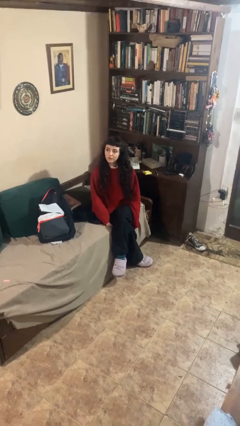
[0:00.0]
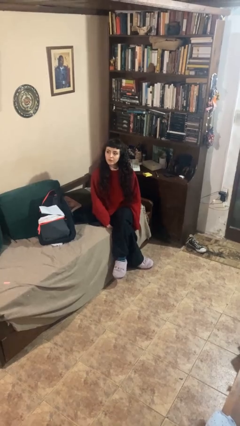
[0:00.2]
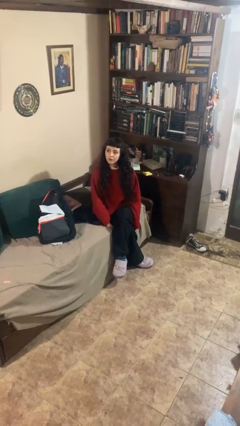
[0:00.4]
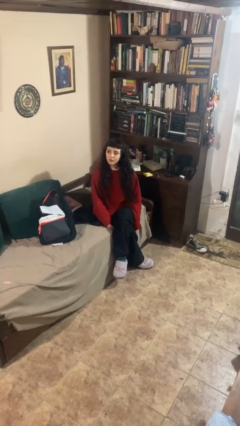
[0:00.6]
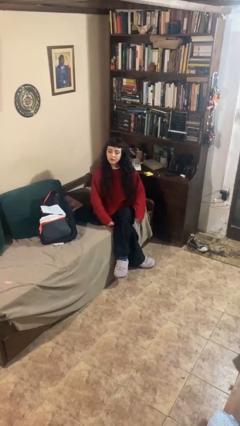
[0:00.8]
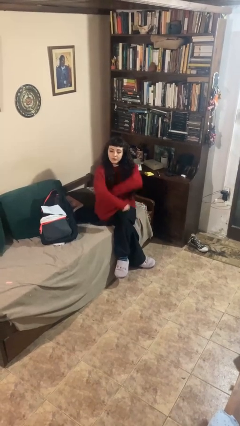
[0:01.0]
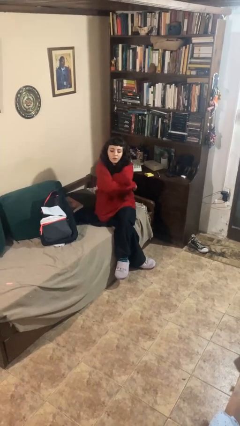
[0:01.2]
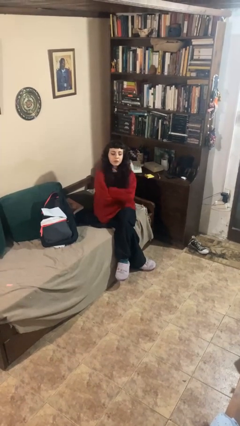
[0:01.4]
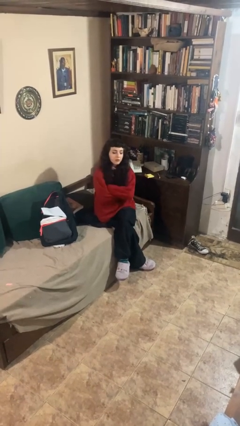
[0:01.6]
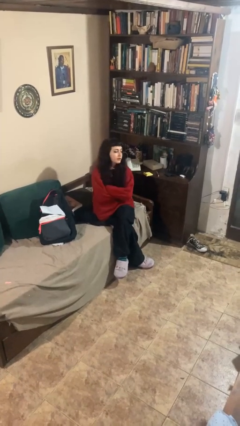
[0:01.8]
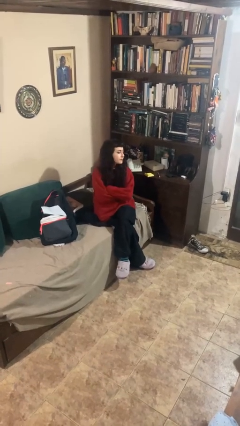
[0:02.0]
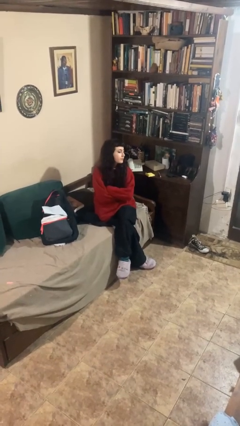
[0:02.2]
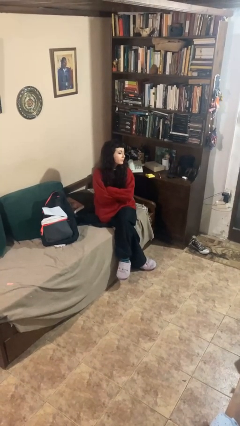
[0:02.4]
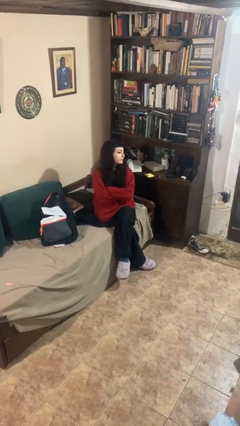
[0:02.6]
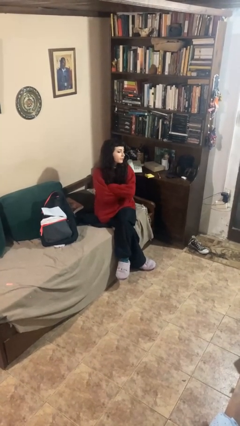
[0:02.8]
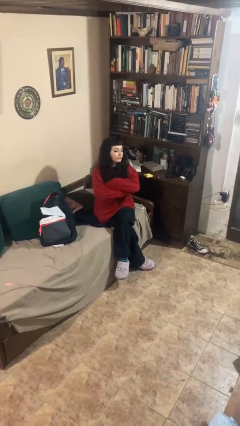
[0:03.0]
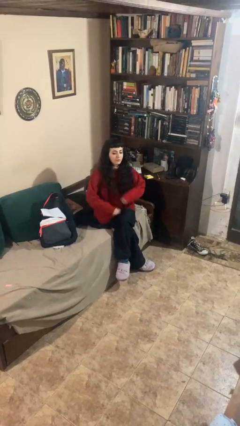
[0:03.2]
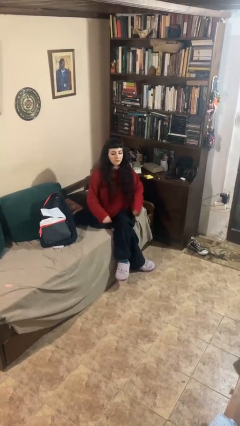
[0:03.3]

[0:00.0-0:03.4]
person crosses arms

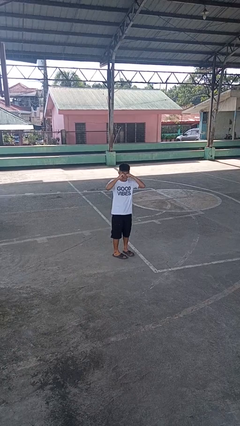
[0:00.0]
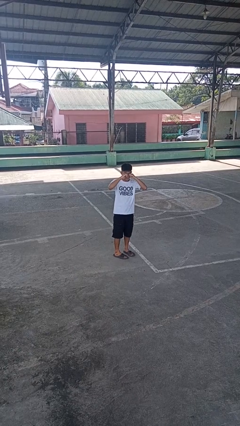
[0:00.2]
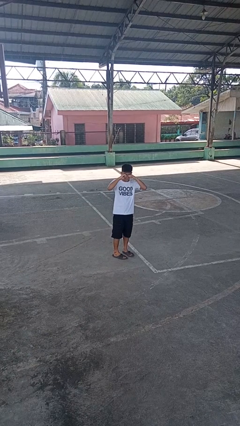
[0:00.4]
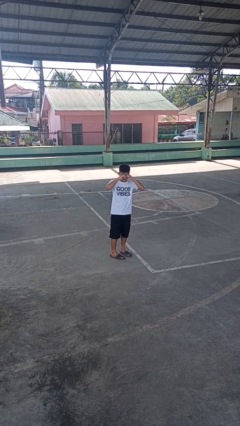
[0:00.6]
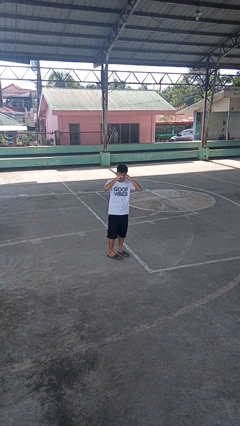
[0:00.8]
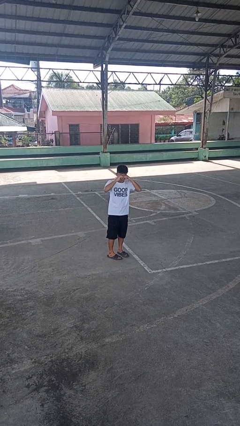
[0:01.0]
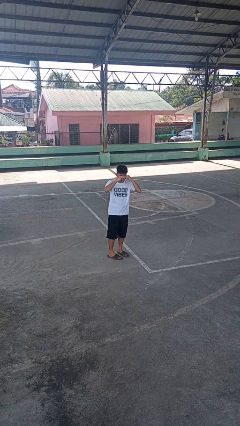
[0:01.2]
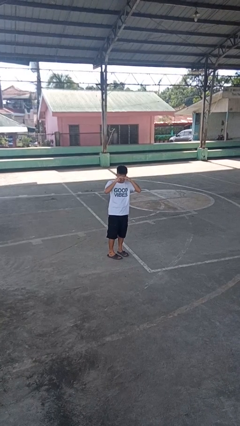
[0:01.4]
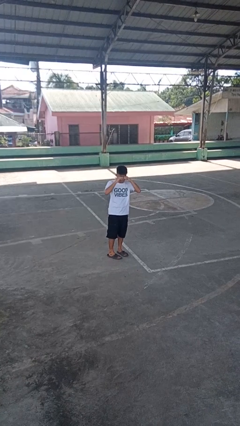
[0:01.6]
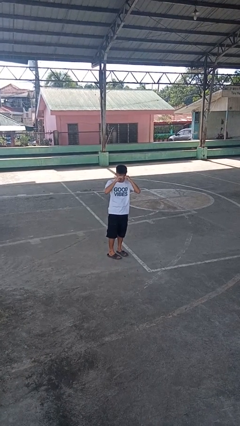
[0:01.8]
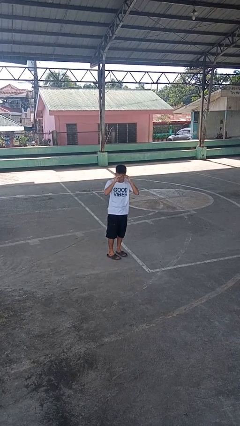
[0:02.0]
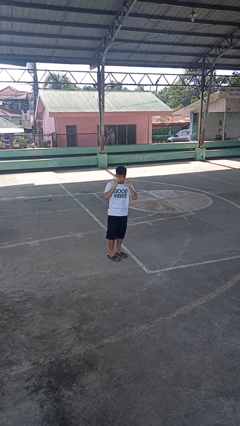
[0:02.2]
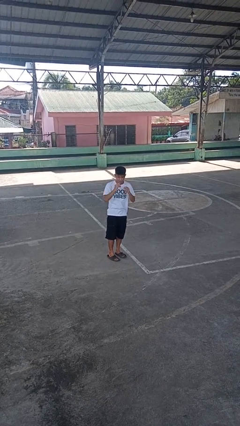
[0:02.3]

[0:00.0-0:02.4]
person rubs eyes

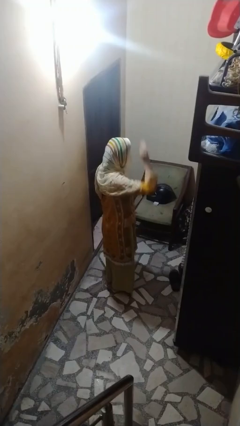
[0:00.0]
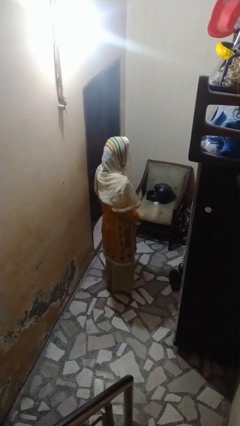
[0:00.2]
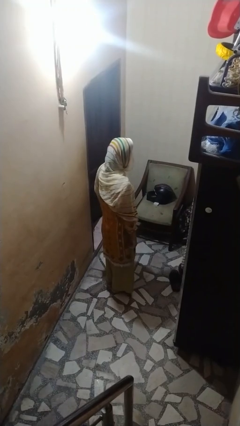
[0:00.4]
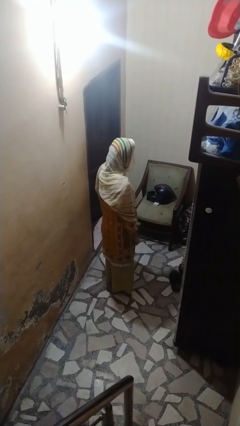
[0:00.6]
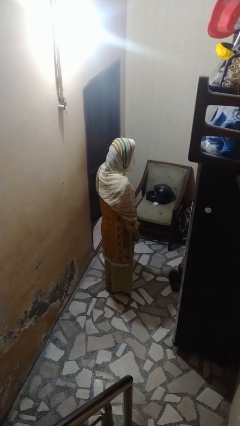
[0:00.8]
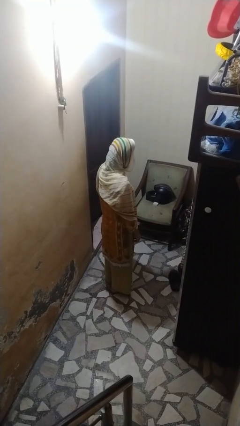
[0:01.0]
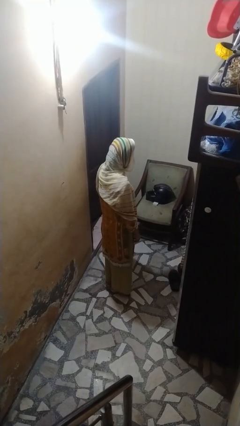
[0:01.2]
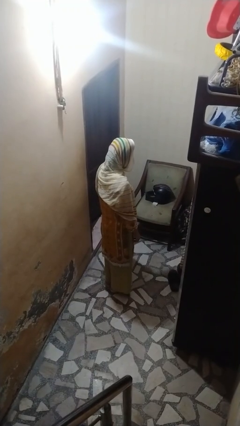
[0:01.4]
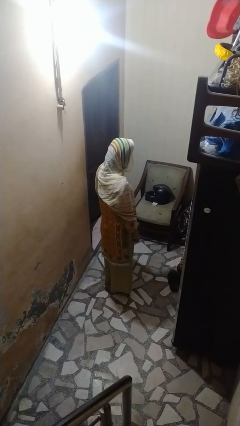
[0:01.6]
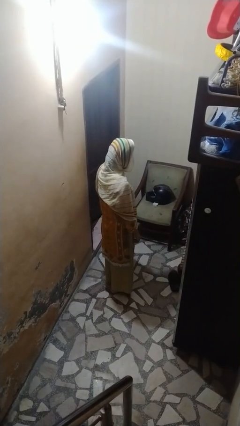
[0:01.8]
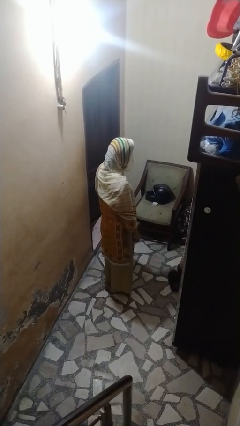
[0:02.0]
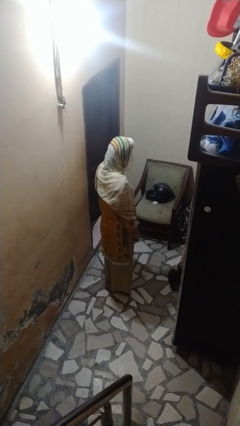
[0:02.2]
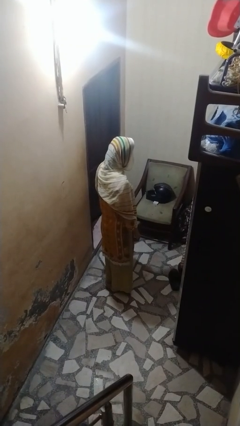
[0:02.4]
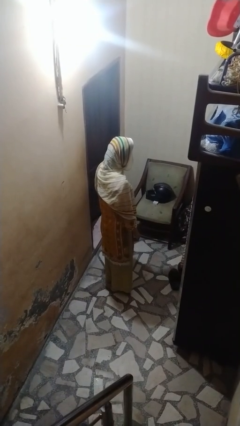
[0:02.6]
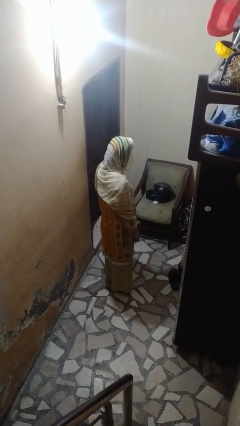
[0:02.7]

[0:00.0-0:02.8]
person gestures lower hand

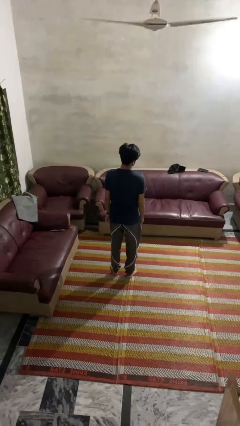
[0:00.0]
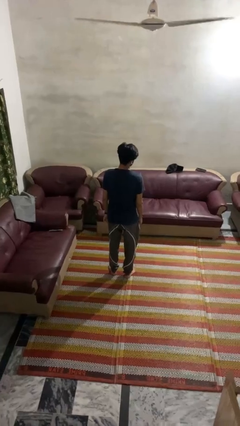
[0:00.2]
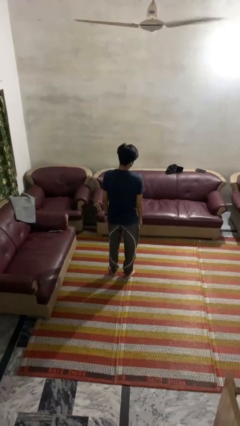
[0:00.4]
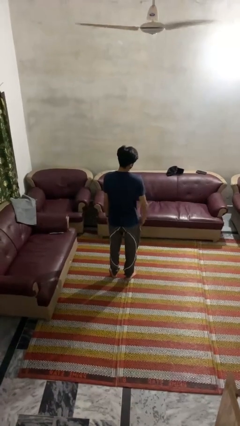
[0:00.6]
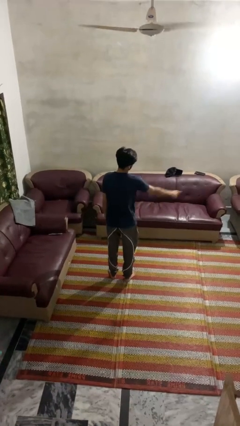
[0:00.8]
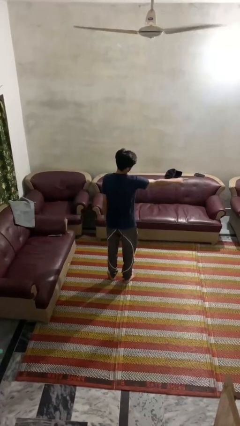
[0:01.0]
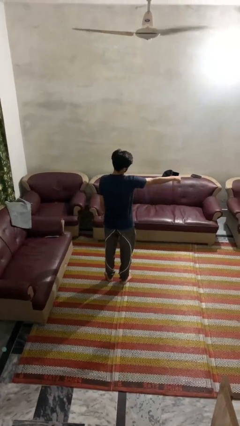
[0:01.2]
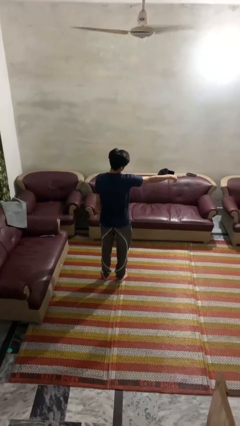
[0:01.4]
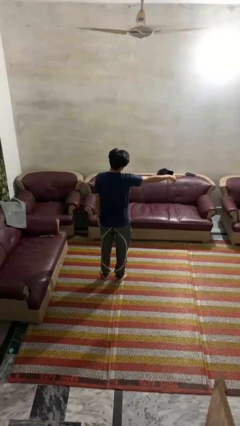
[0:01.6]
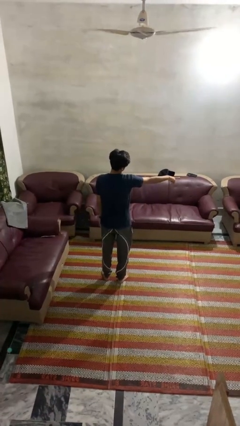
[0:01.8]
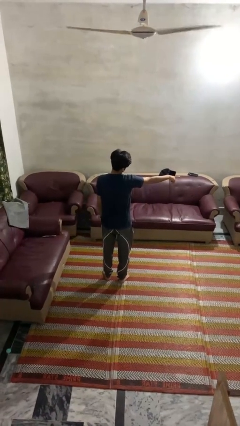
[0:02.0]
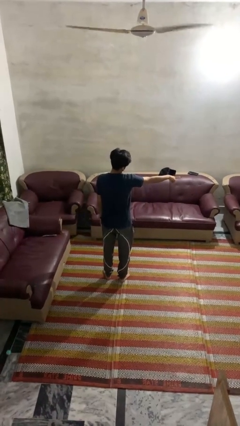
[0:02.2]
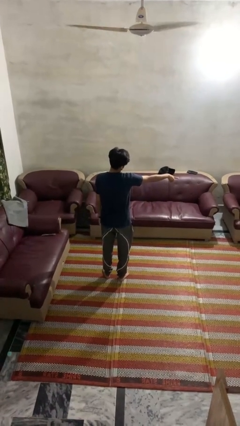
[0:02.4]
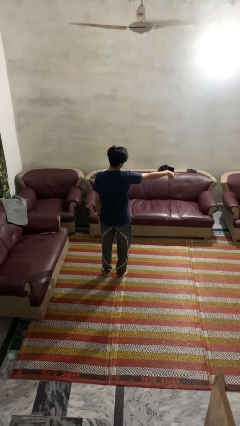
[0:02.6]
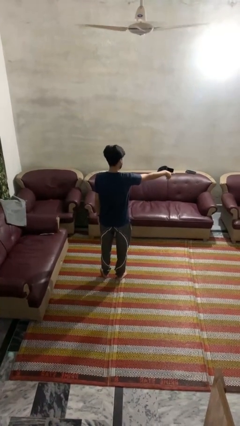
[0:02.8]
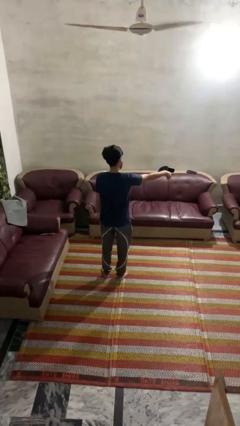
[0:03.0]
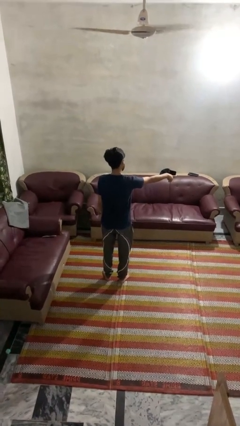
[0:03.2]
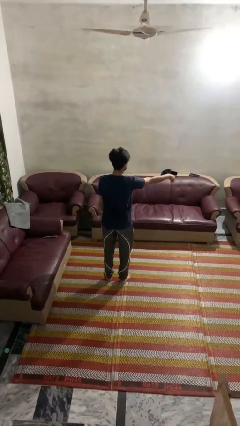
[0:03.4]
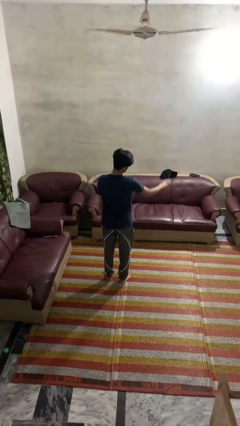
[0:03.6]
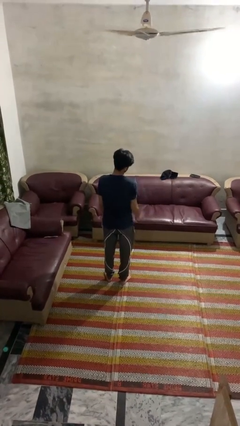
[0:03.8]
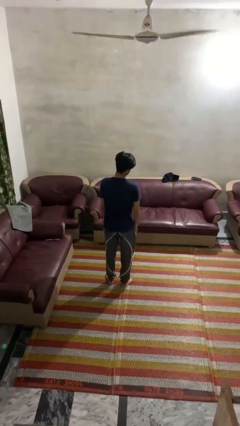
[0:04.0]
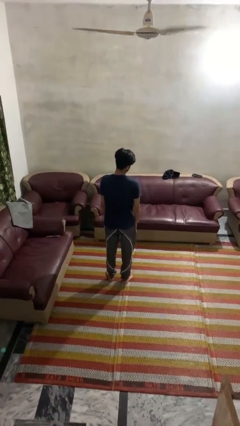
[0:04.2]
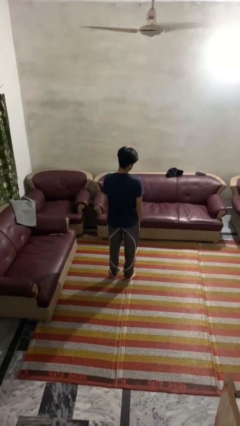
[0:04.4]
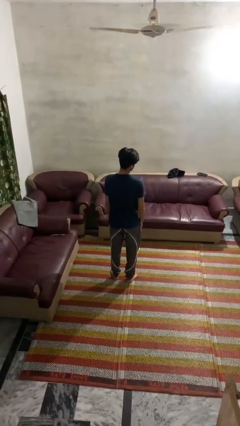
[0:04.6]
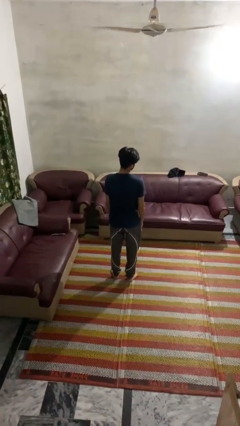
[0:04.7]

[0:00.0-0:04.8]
person points at person

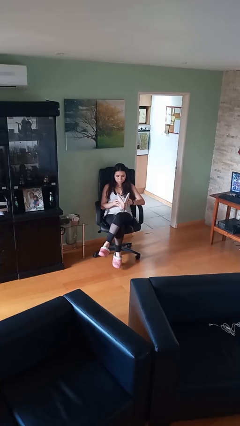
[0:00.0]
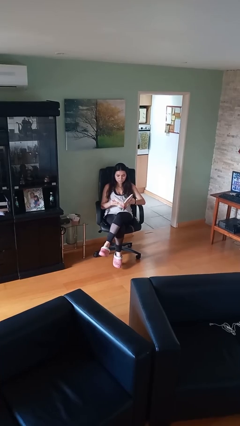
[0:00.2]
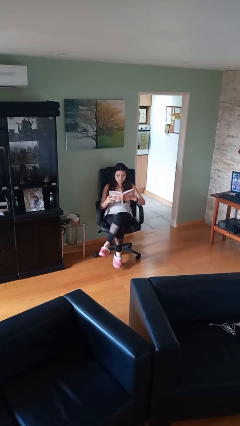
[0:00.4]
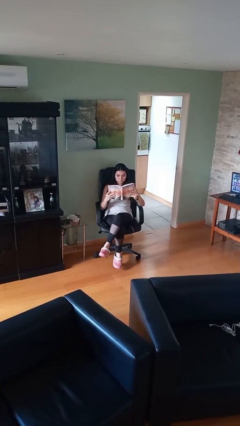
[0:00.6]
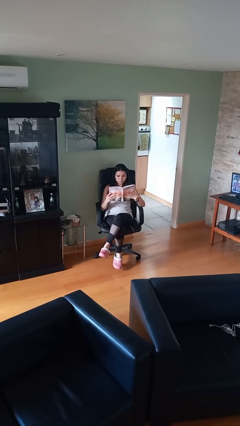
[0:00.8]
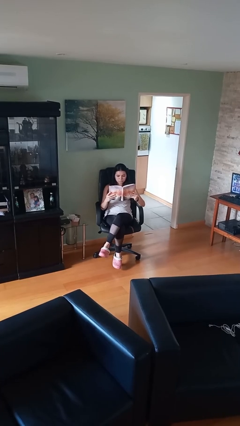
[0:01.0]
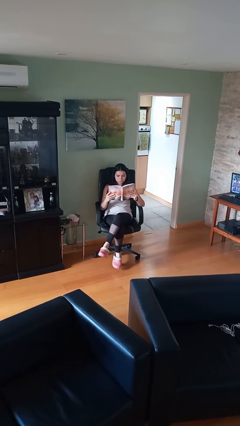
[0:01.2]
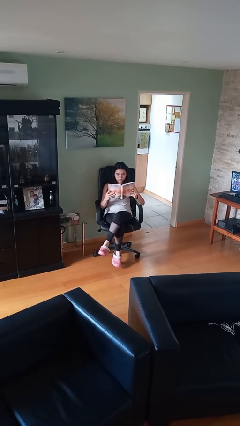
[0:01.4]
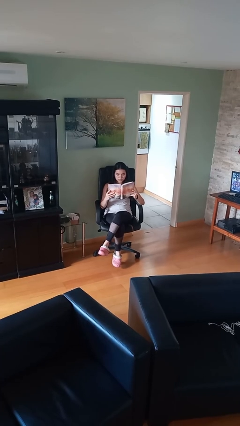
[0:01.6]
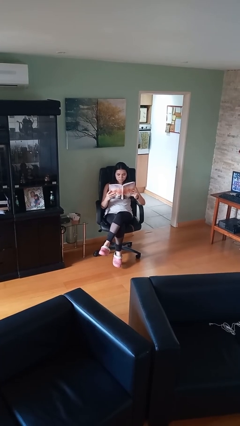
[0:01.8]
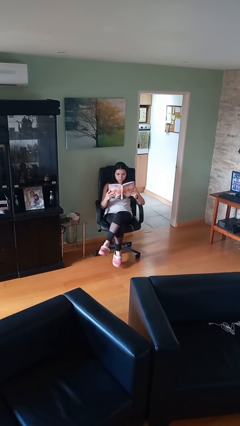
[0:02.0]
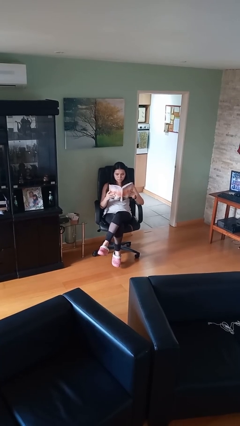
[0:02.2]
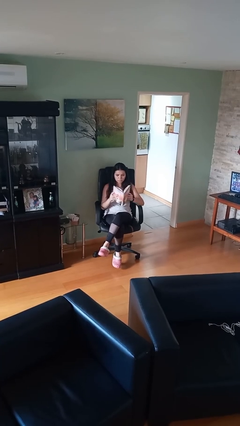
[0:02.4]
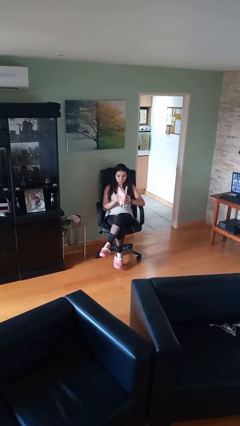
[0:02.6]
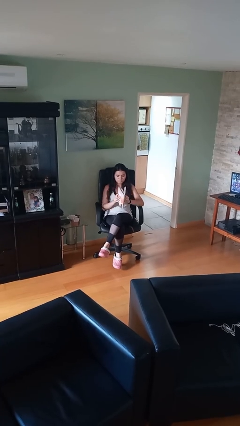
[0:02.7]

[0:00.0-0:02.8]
person reads document

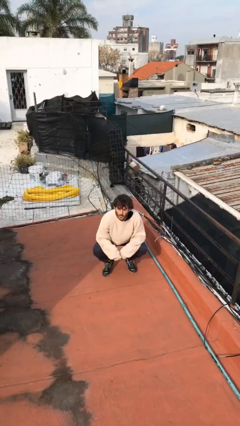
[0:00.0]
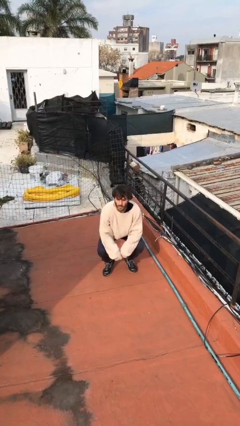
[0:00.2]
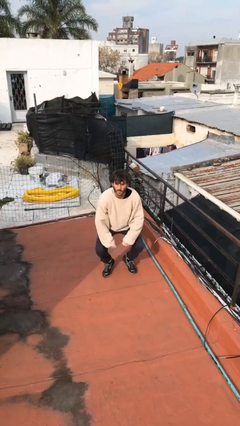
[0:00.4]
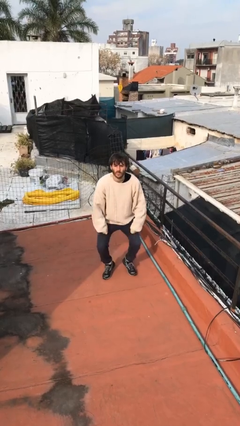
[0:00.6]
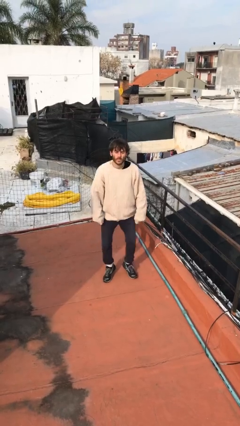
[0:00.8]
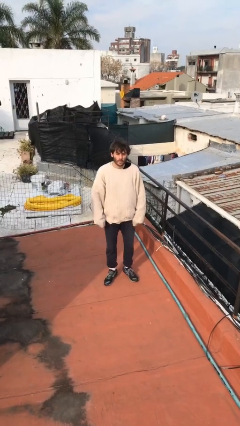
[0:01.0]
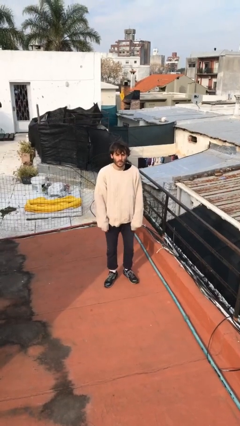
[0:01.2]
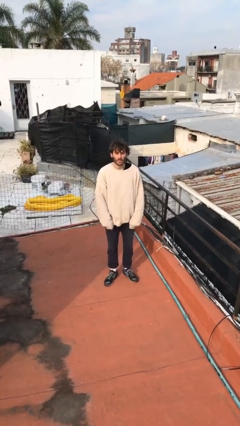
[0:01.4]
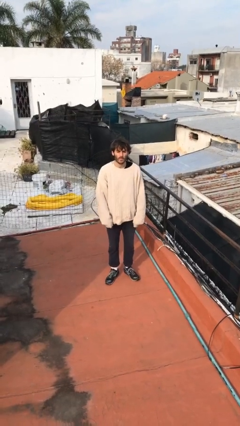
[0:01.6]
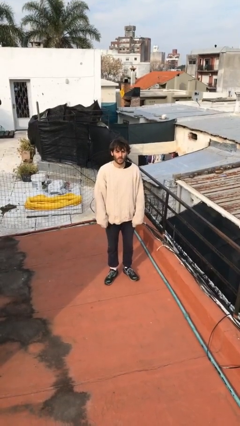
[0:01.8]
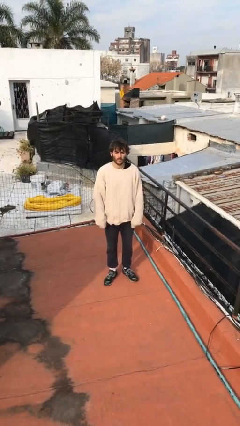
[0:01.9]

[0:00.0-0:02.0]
person stands up
